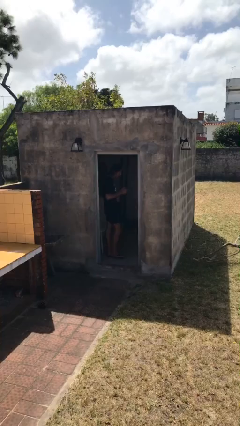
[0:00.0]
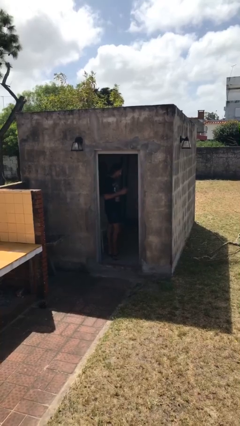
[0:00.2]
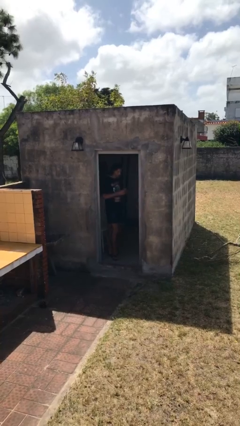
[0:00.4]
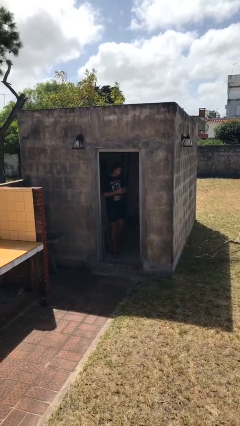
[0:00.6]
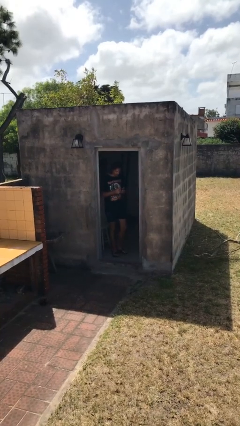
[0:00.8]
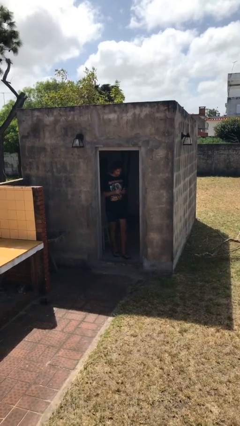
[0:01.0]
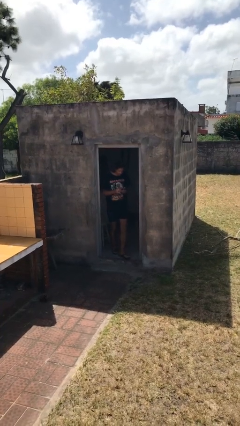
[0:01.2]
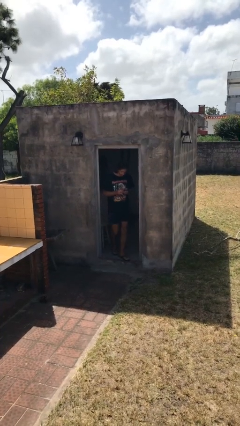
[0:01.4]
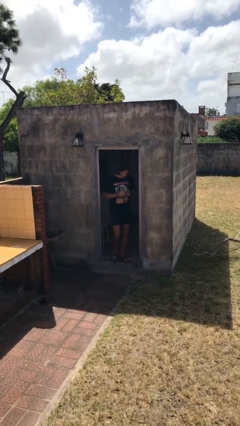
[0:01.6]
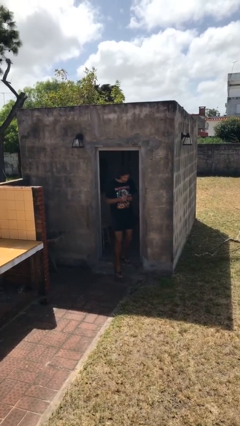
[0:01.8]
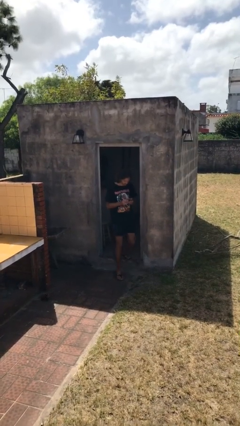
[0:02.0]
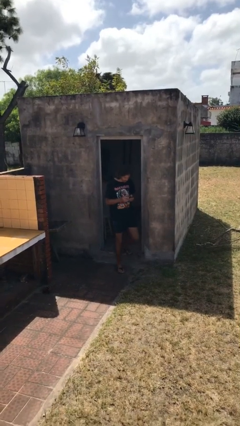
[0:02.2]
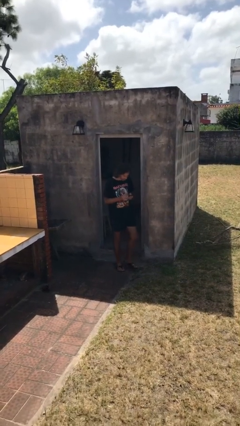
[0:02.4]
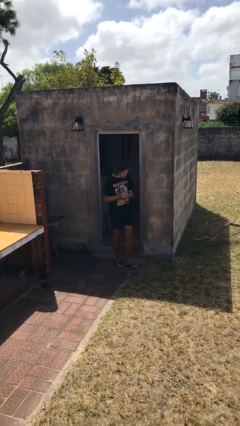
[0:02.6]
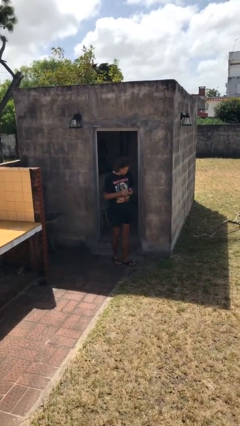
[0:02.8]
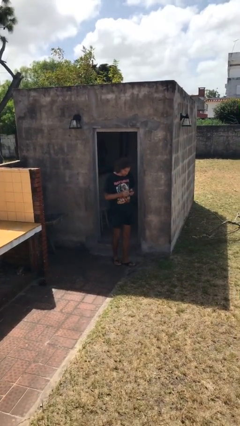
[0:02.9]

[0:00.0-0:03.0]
person enters scene through structure

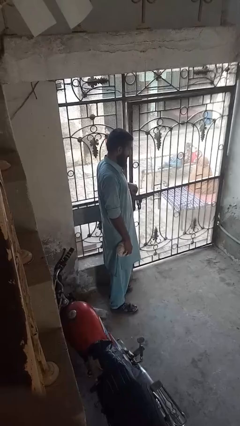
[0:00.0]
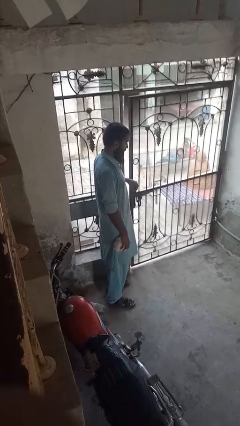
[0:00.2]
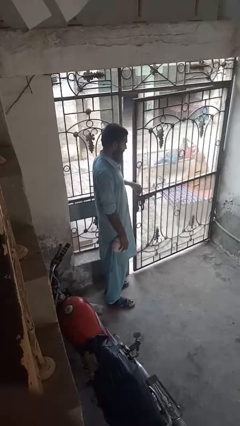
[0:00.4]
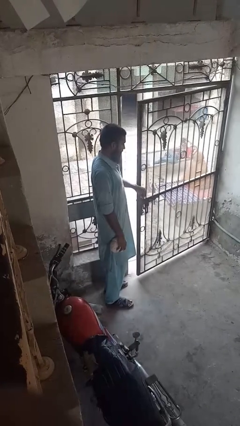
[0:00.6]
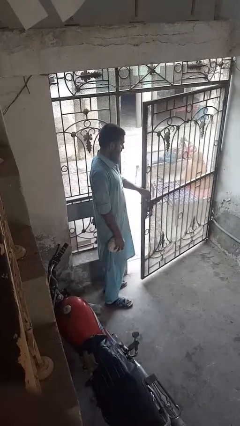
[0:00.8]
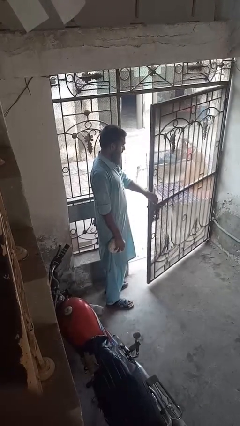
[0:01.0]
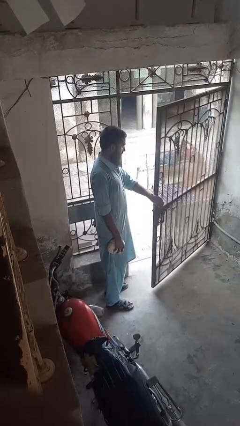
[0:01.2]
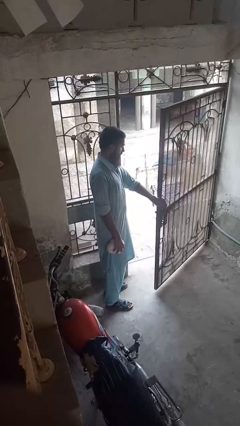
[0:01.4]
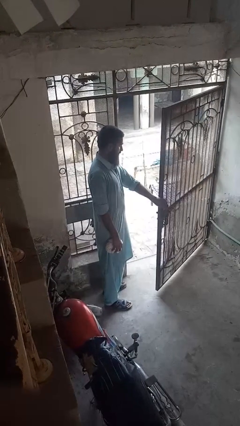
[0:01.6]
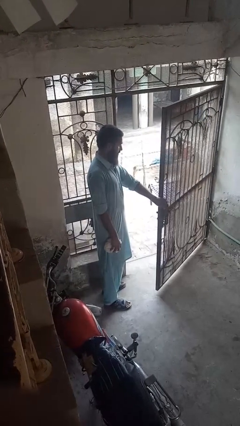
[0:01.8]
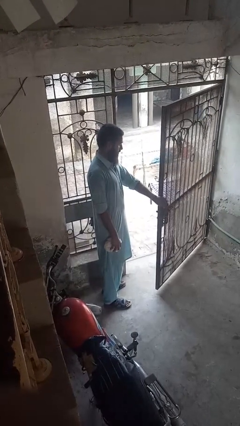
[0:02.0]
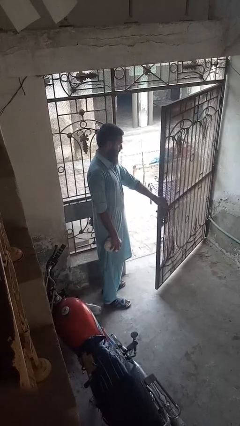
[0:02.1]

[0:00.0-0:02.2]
person opens gate

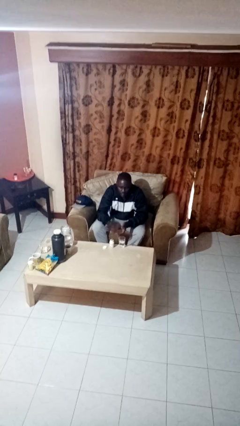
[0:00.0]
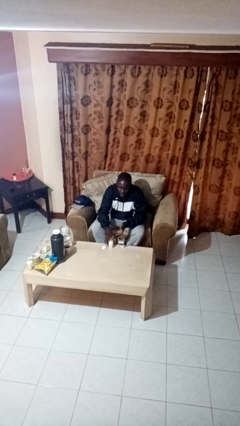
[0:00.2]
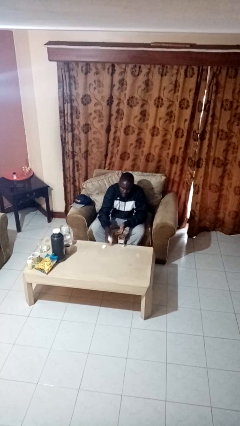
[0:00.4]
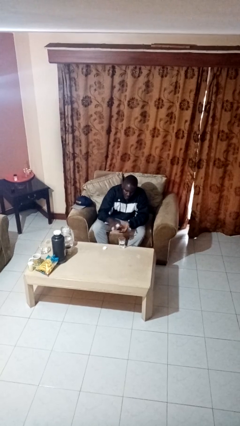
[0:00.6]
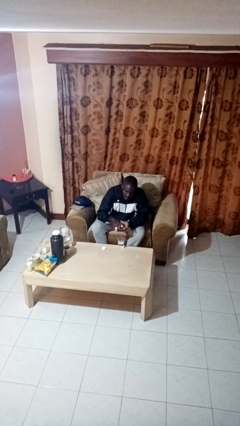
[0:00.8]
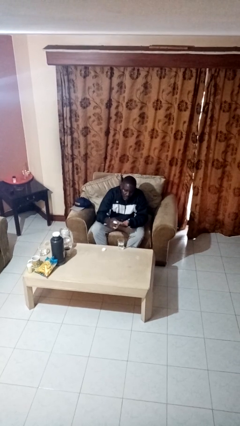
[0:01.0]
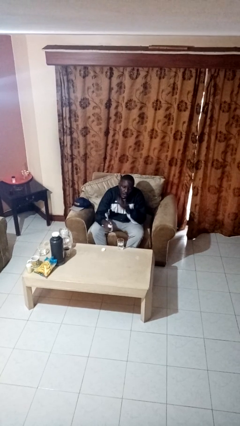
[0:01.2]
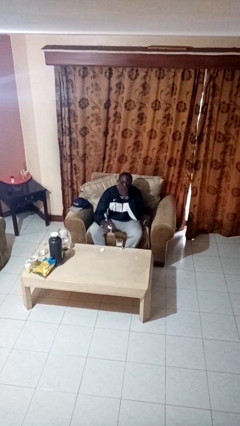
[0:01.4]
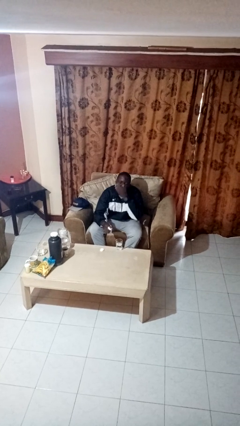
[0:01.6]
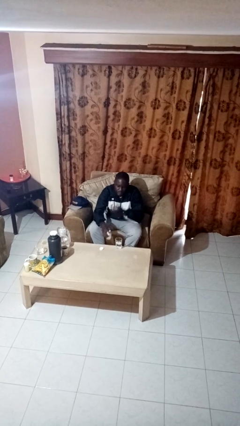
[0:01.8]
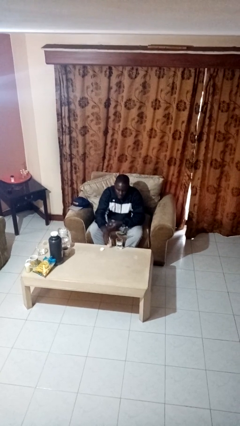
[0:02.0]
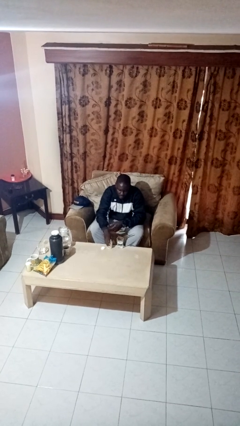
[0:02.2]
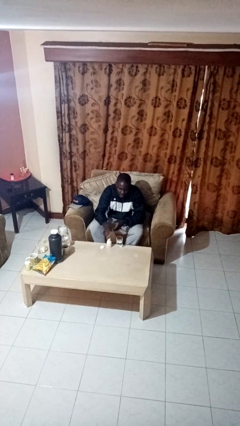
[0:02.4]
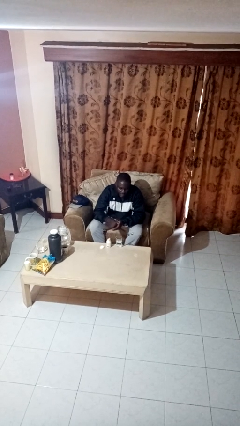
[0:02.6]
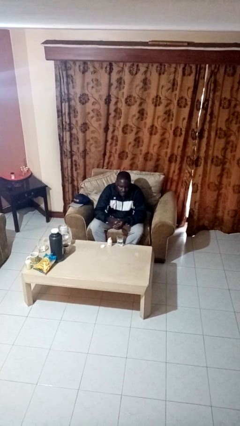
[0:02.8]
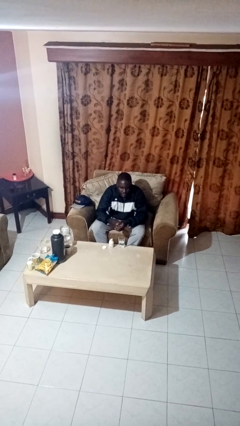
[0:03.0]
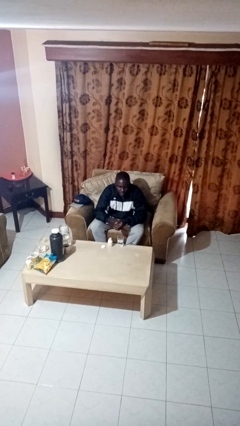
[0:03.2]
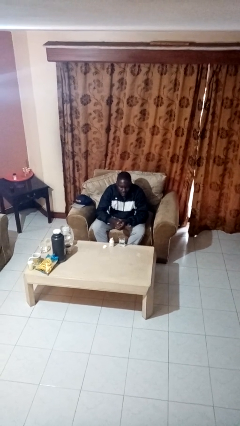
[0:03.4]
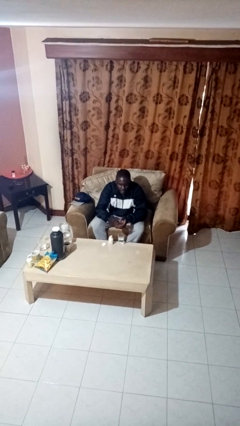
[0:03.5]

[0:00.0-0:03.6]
person takes medicine pills

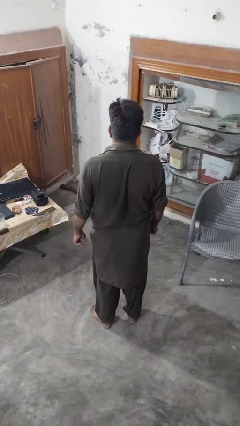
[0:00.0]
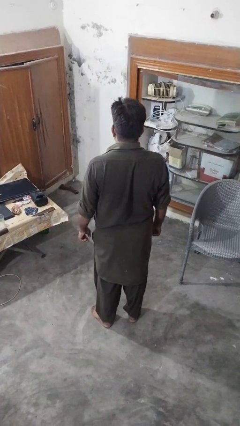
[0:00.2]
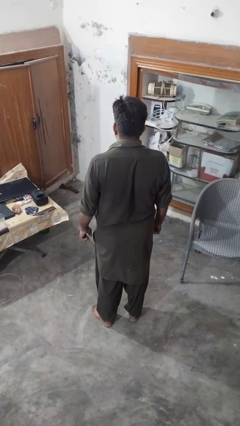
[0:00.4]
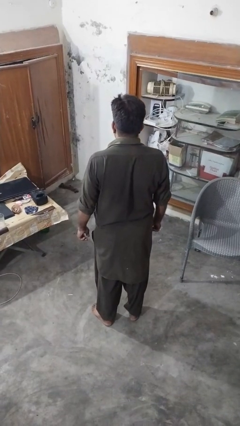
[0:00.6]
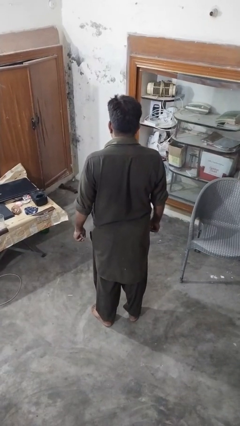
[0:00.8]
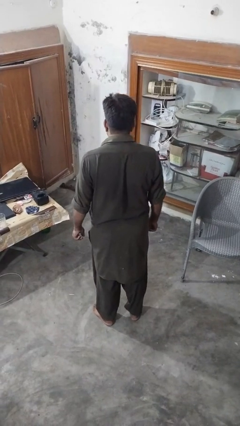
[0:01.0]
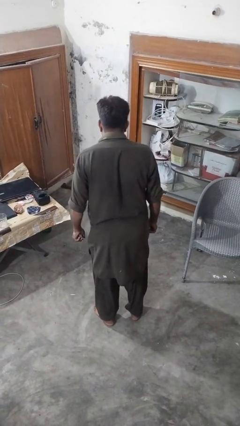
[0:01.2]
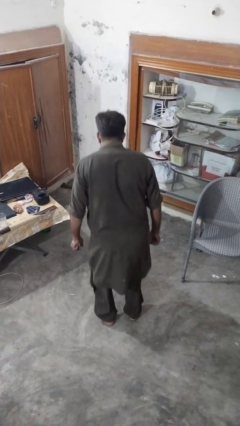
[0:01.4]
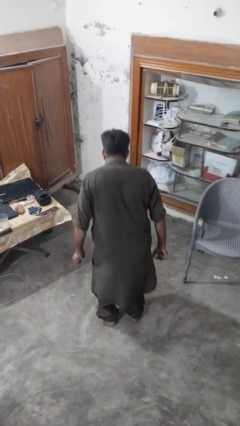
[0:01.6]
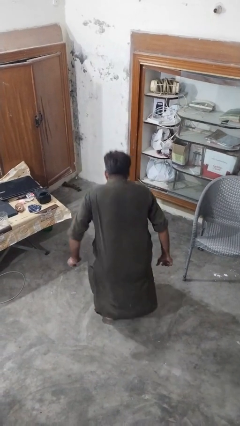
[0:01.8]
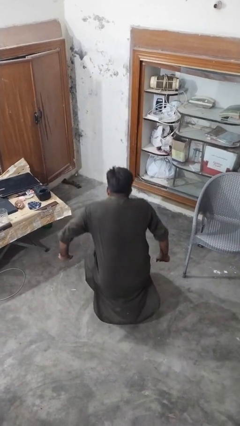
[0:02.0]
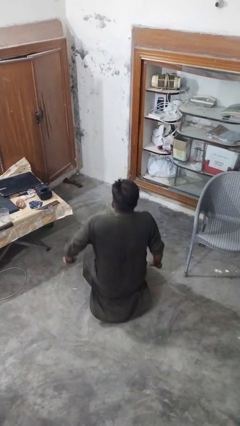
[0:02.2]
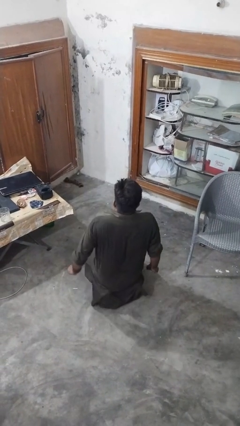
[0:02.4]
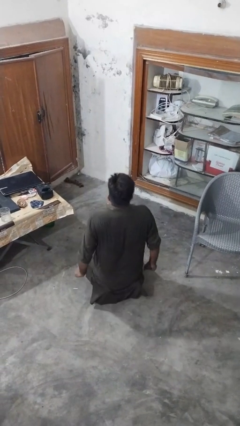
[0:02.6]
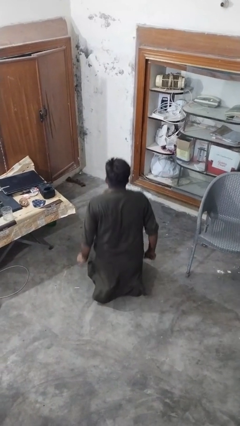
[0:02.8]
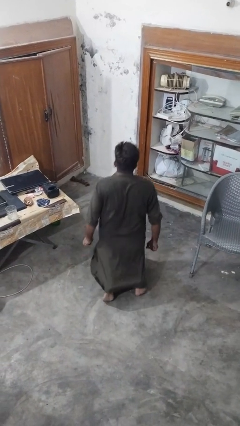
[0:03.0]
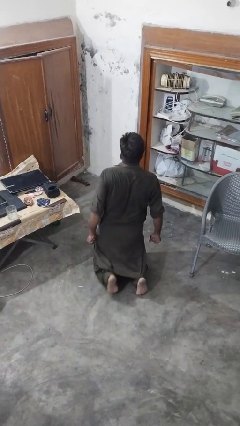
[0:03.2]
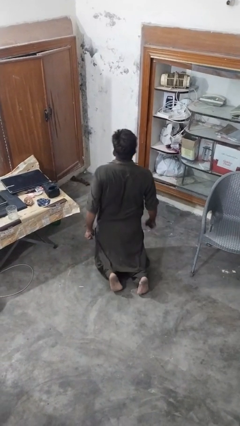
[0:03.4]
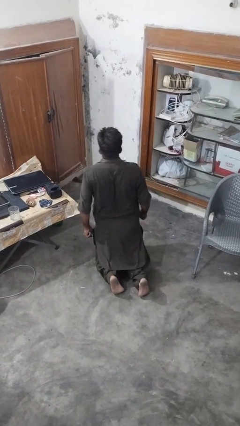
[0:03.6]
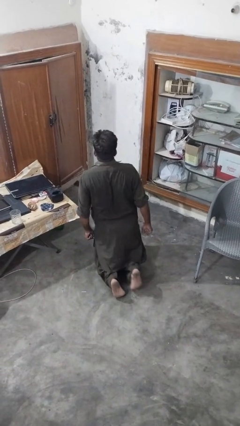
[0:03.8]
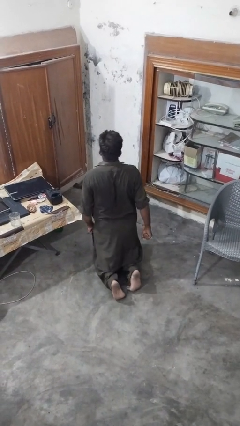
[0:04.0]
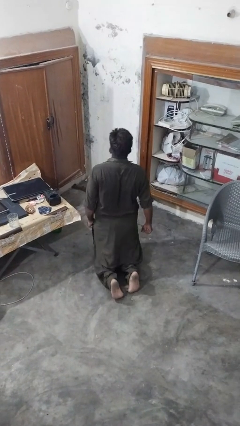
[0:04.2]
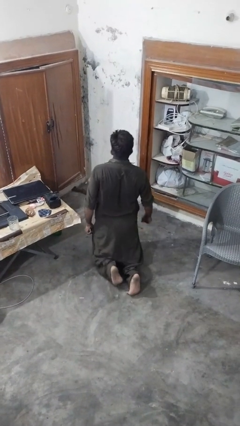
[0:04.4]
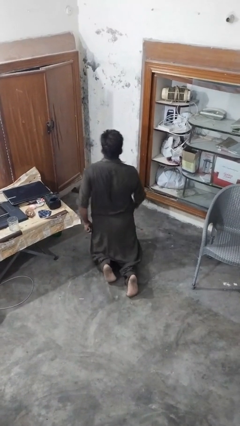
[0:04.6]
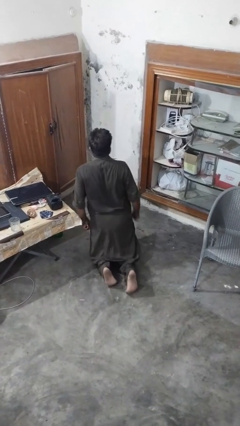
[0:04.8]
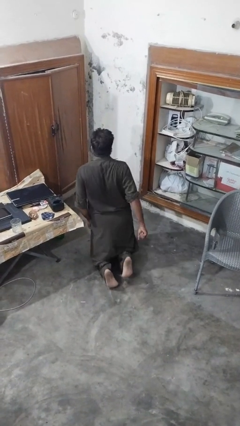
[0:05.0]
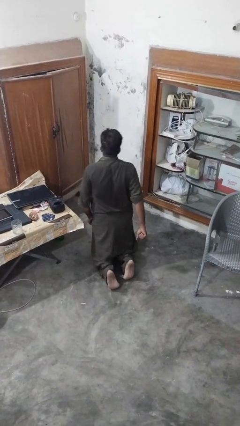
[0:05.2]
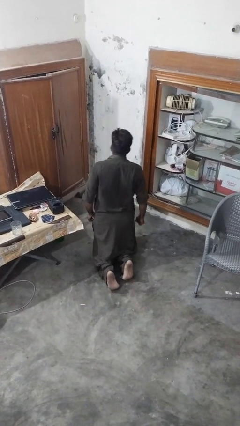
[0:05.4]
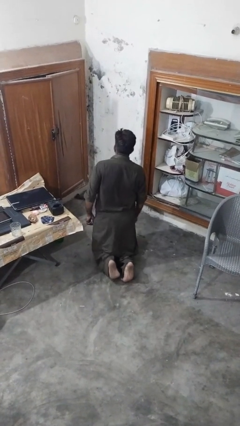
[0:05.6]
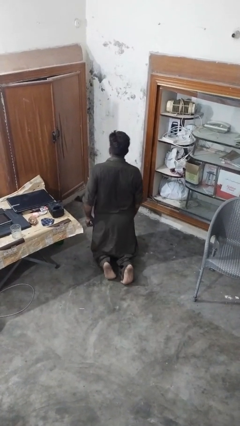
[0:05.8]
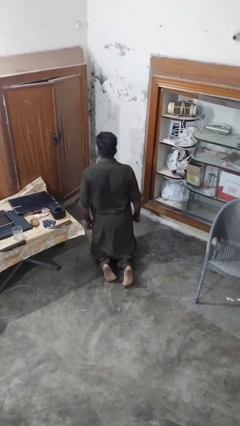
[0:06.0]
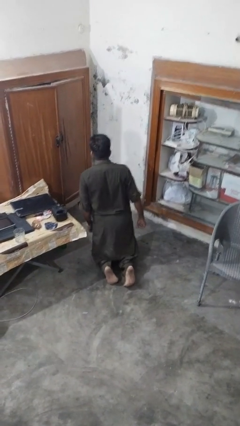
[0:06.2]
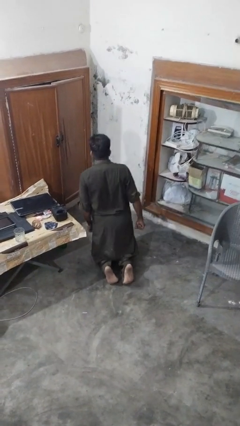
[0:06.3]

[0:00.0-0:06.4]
person exercises with lunges

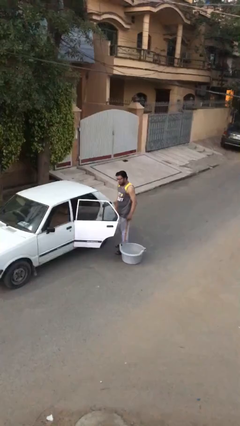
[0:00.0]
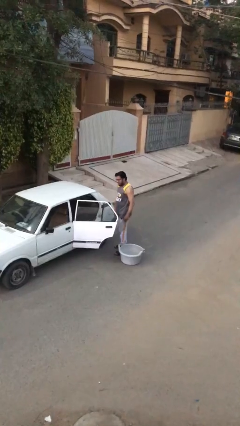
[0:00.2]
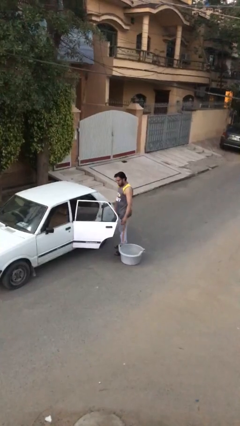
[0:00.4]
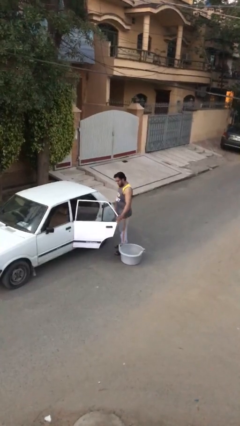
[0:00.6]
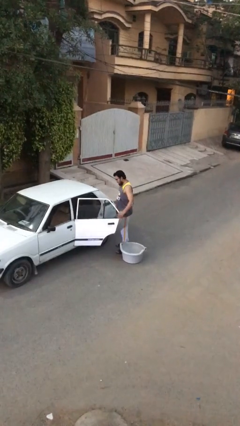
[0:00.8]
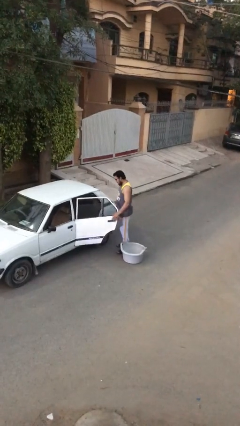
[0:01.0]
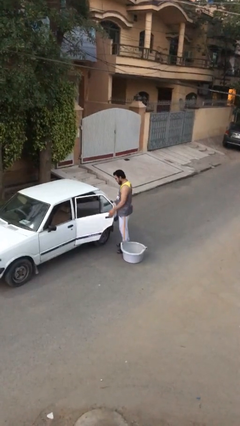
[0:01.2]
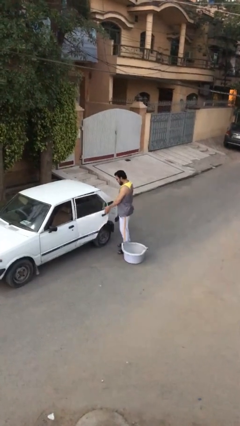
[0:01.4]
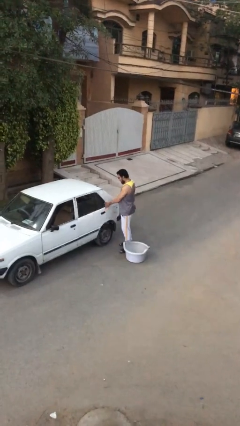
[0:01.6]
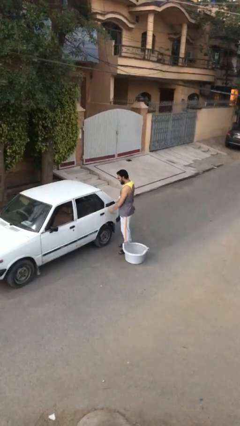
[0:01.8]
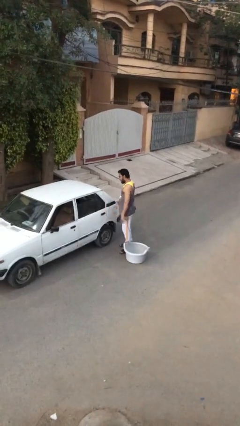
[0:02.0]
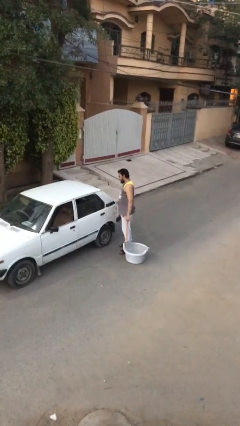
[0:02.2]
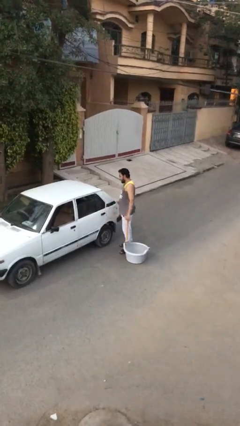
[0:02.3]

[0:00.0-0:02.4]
person closes car door
